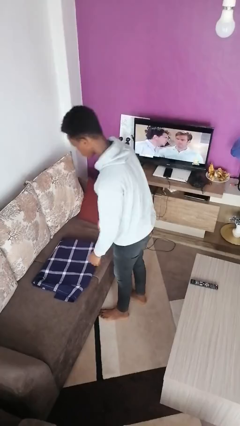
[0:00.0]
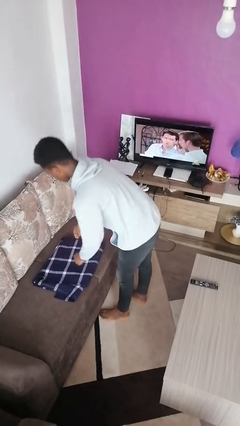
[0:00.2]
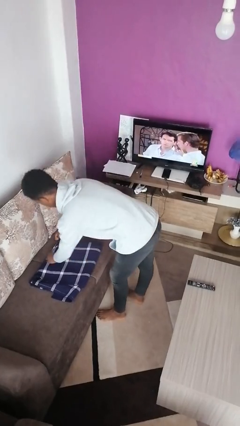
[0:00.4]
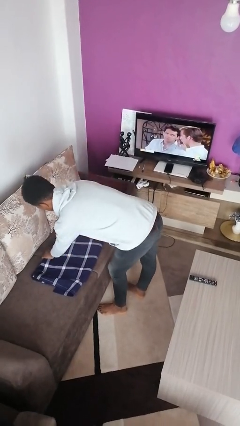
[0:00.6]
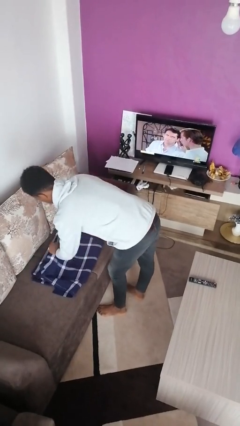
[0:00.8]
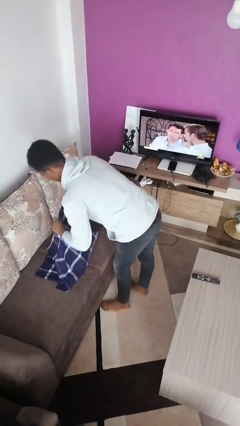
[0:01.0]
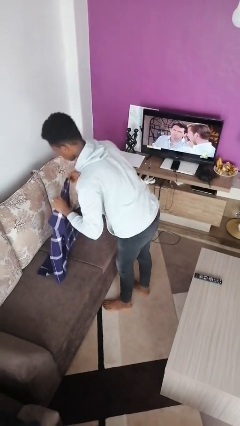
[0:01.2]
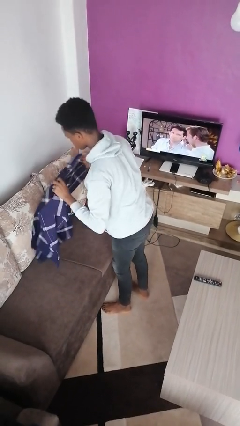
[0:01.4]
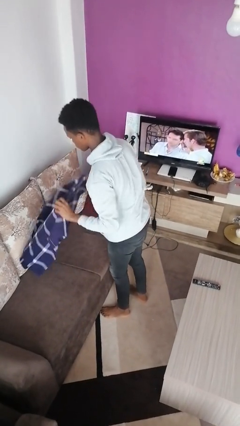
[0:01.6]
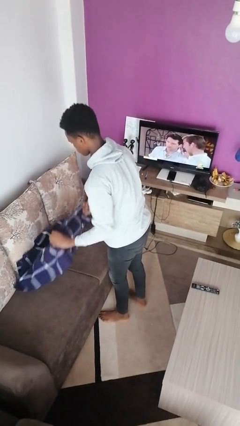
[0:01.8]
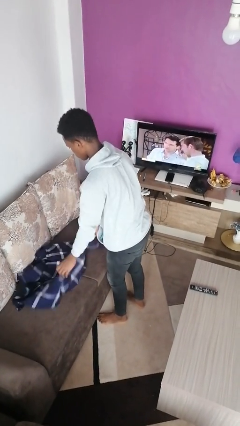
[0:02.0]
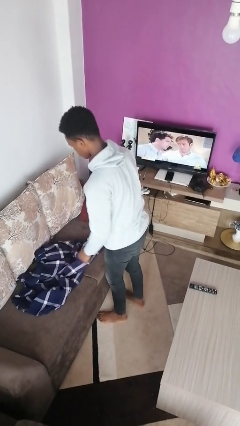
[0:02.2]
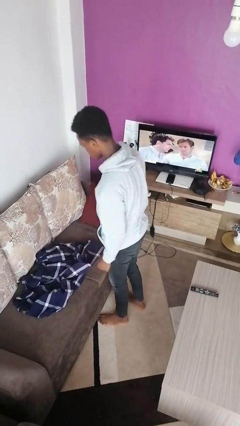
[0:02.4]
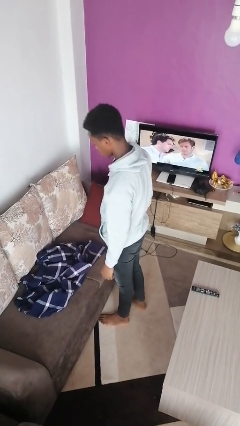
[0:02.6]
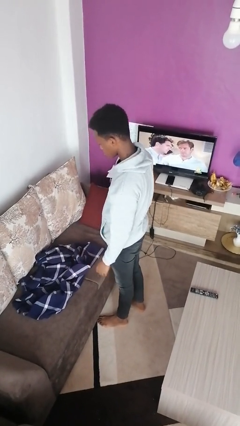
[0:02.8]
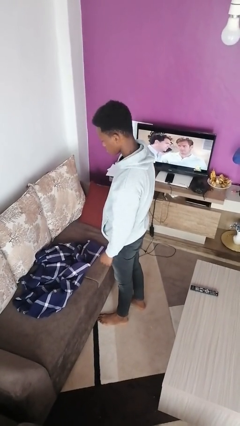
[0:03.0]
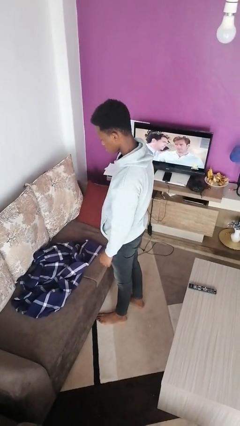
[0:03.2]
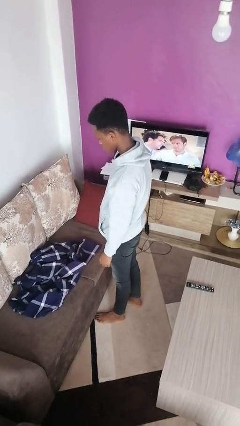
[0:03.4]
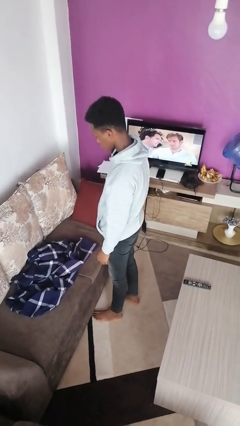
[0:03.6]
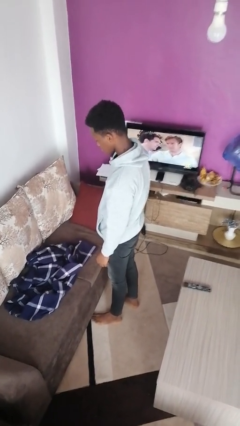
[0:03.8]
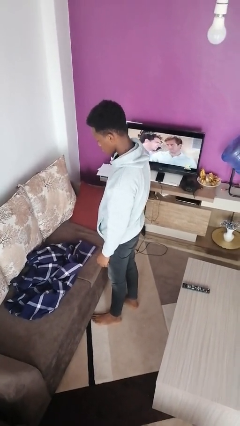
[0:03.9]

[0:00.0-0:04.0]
person unfolds blanket

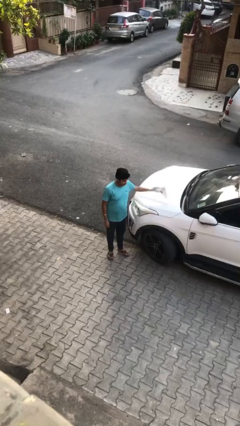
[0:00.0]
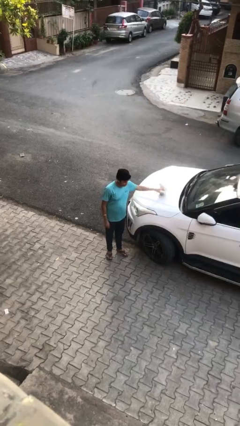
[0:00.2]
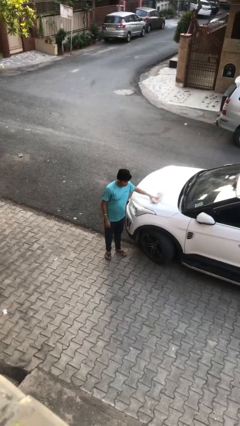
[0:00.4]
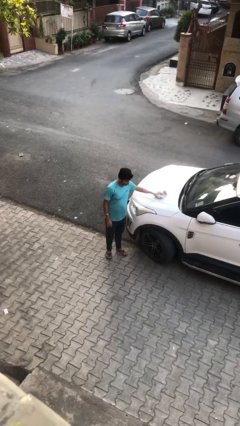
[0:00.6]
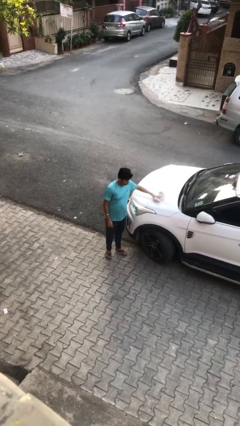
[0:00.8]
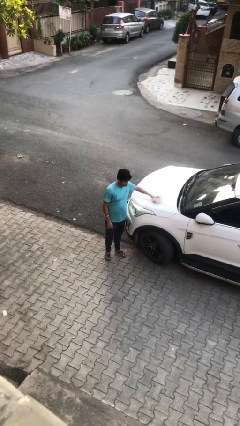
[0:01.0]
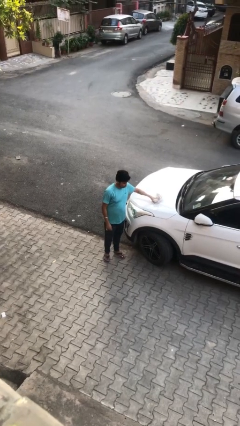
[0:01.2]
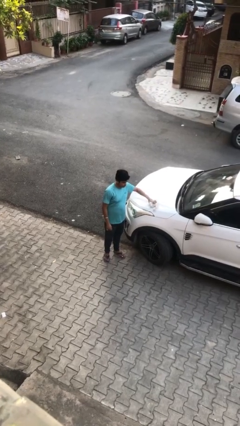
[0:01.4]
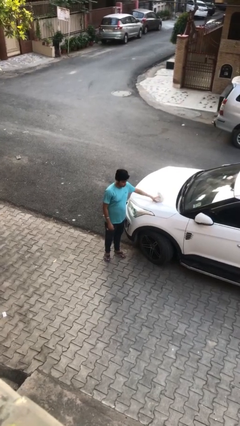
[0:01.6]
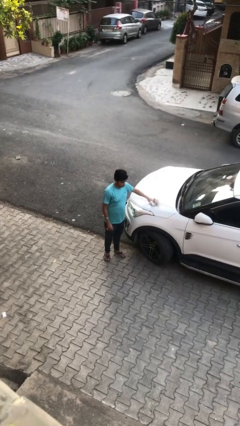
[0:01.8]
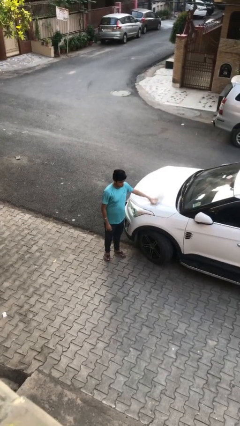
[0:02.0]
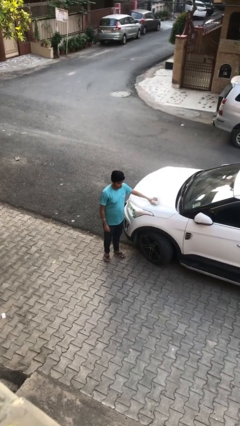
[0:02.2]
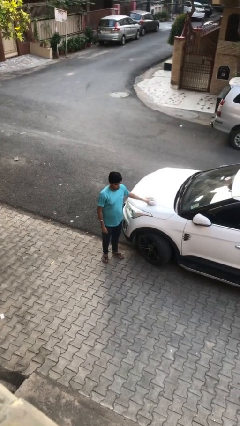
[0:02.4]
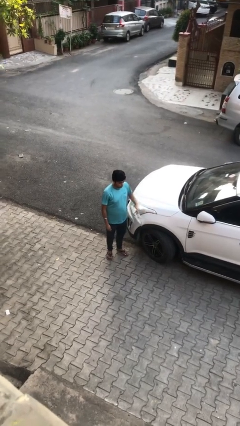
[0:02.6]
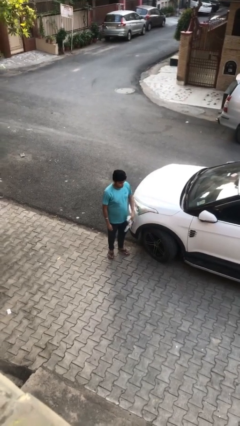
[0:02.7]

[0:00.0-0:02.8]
person polishes car with rag

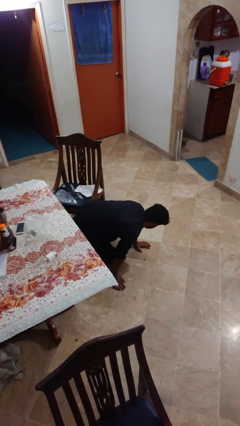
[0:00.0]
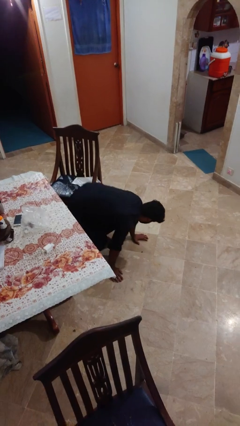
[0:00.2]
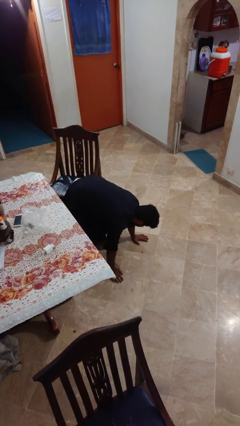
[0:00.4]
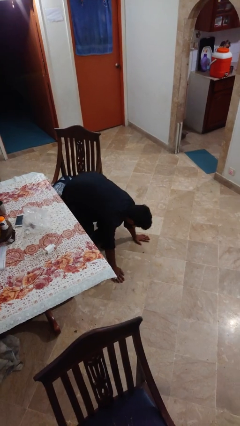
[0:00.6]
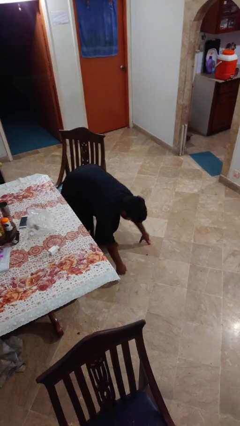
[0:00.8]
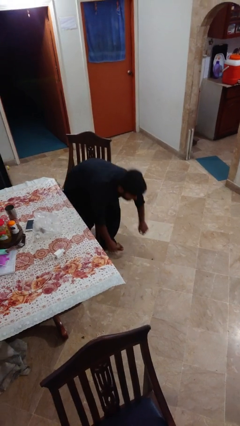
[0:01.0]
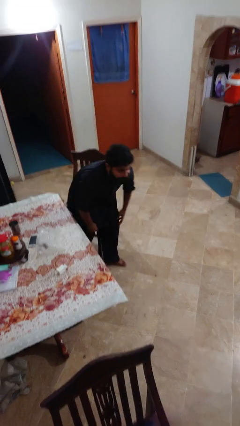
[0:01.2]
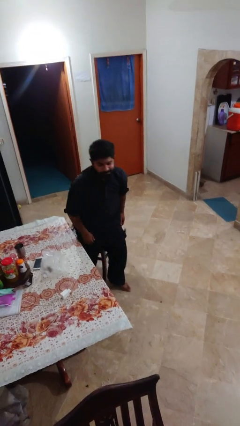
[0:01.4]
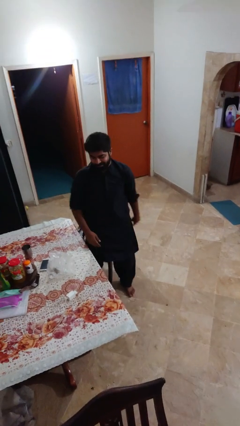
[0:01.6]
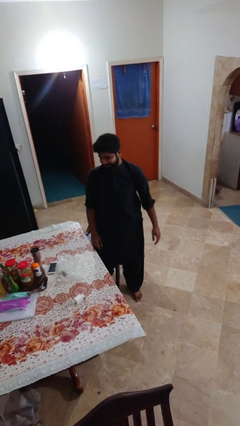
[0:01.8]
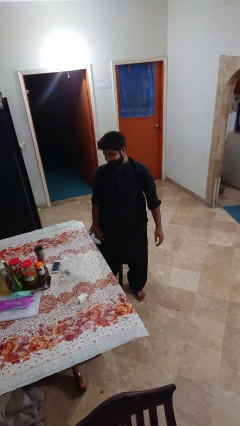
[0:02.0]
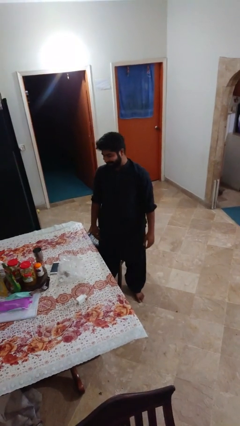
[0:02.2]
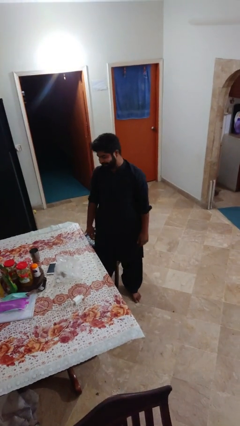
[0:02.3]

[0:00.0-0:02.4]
person stands up from floor

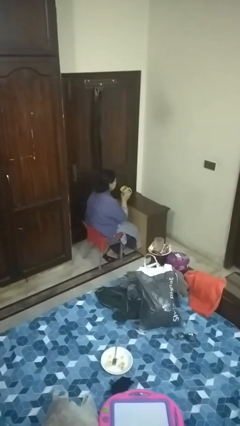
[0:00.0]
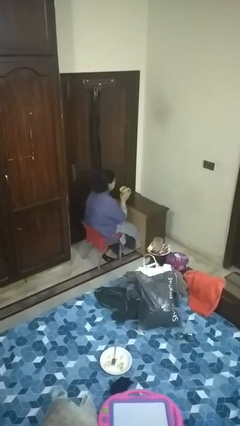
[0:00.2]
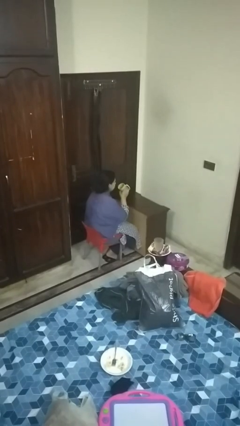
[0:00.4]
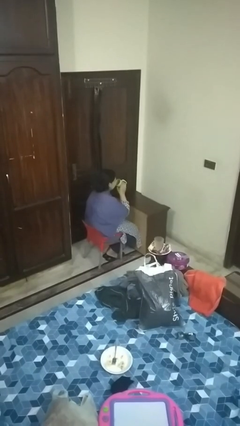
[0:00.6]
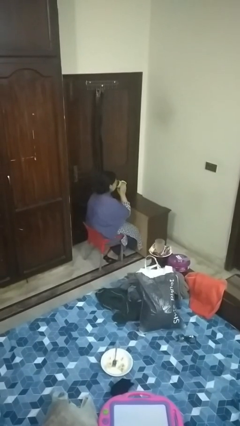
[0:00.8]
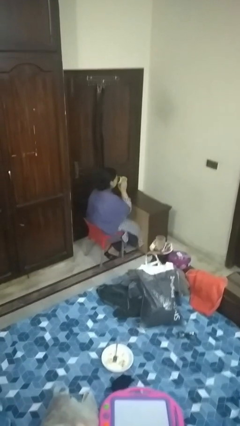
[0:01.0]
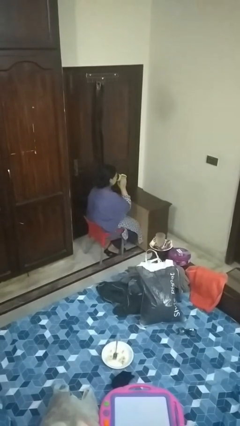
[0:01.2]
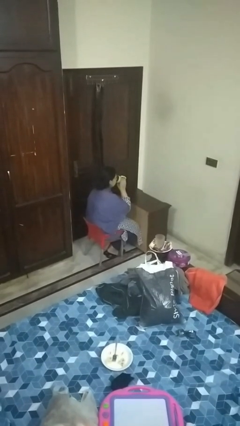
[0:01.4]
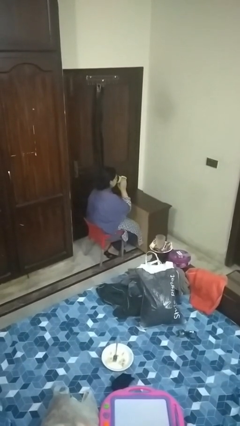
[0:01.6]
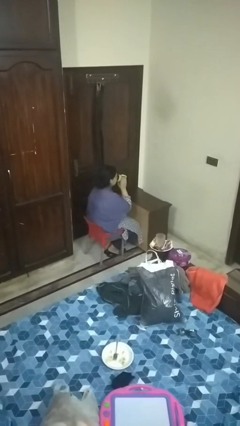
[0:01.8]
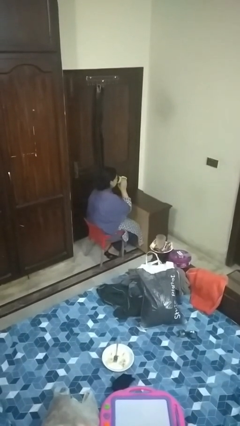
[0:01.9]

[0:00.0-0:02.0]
person drinks from mug

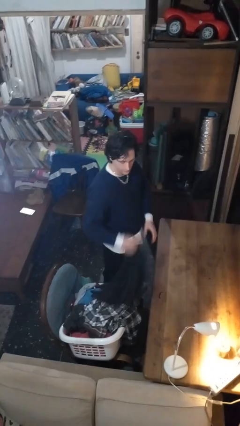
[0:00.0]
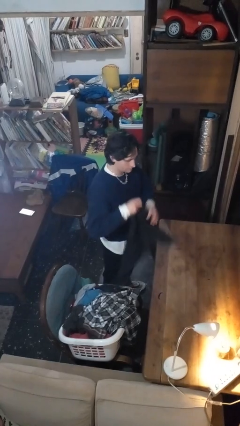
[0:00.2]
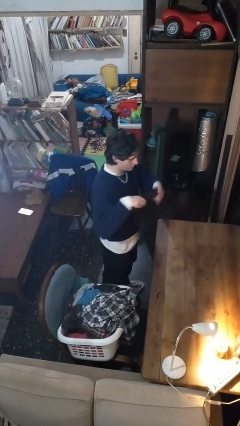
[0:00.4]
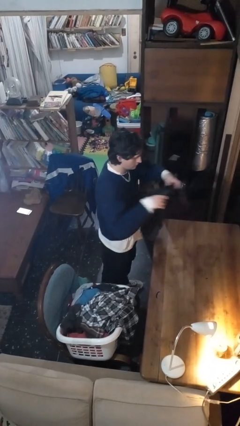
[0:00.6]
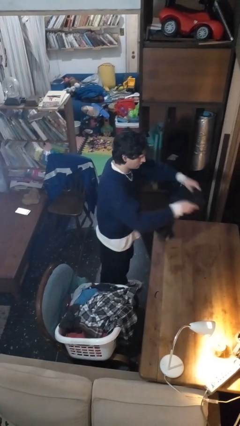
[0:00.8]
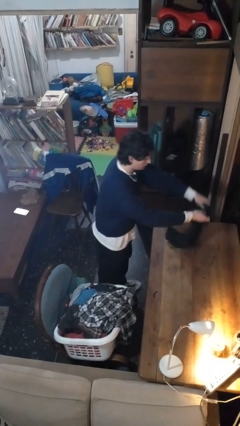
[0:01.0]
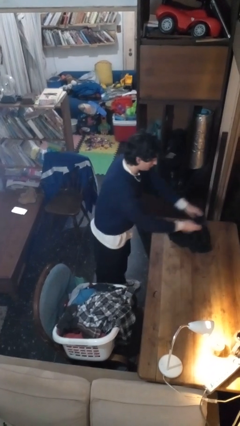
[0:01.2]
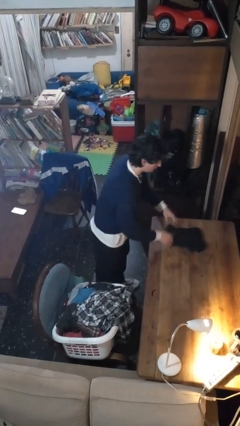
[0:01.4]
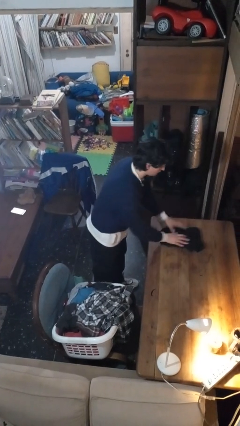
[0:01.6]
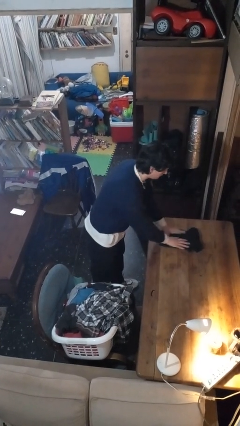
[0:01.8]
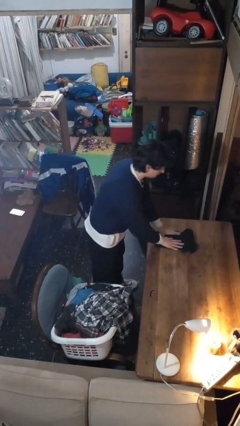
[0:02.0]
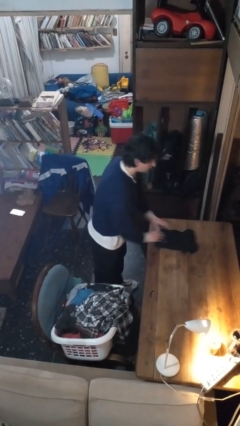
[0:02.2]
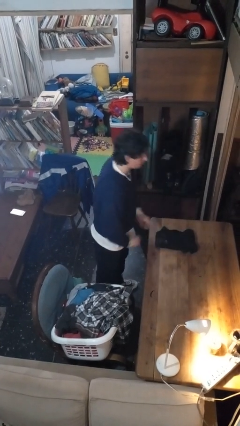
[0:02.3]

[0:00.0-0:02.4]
person folds shirt

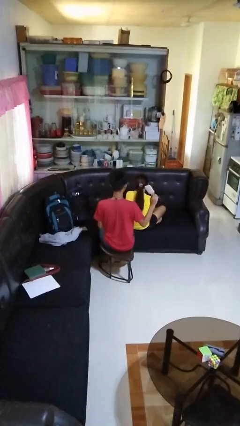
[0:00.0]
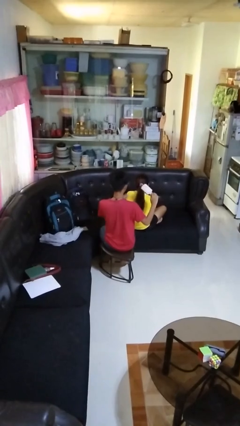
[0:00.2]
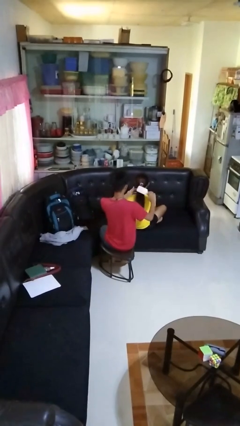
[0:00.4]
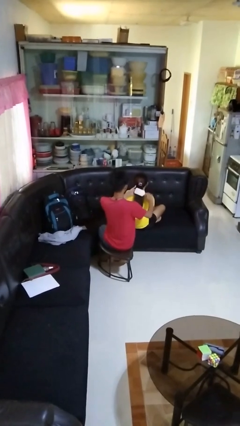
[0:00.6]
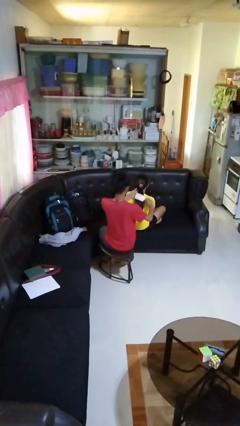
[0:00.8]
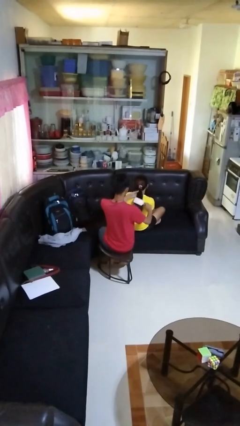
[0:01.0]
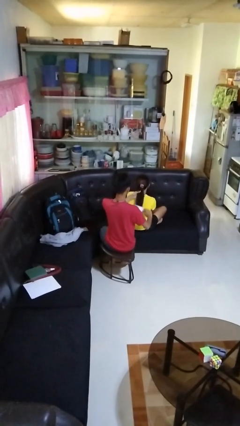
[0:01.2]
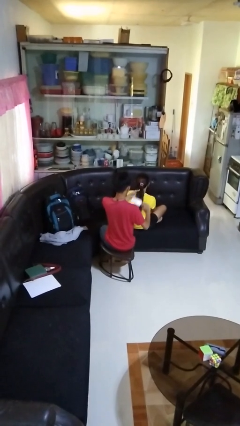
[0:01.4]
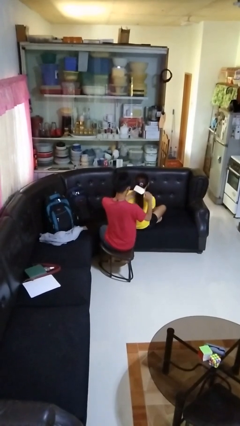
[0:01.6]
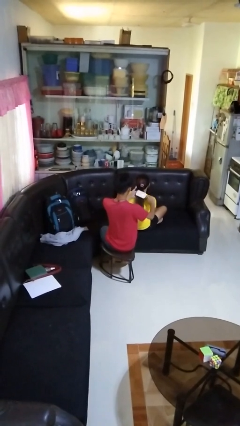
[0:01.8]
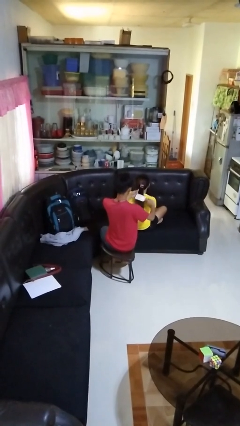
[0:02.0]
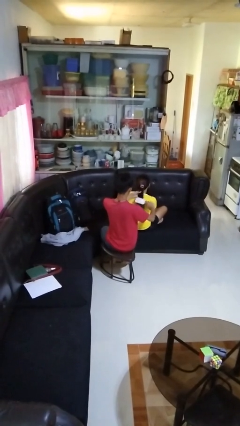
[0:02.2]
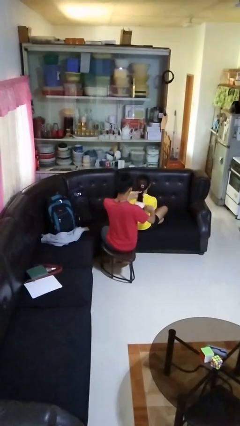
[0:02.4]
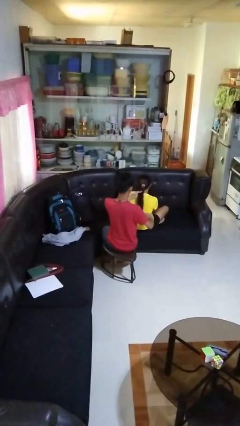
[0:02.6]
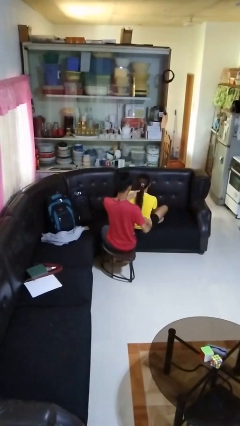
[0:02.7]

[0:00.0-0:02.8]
person brushes hair of person

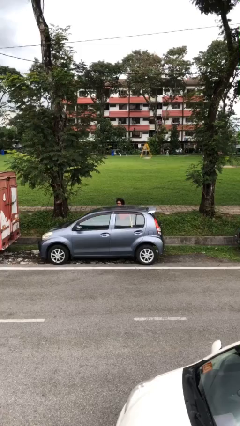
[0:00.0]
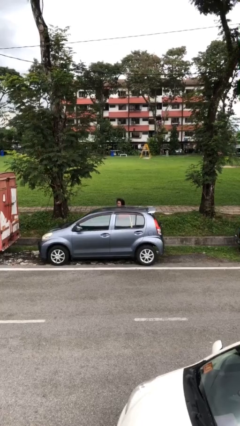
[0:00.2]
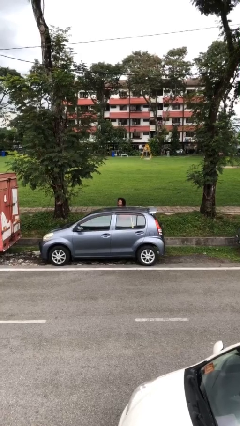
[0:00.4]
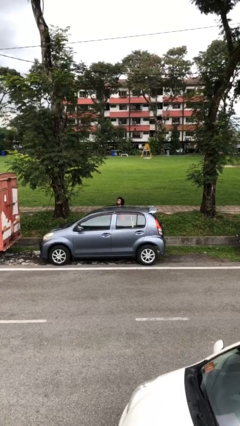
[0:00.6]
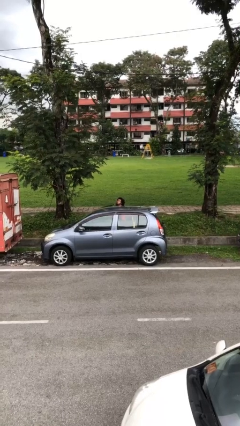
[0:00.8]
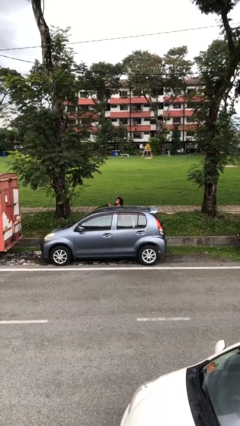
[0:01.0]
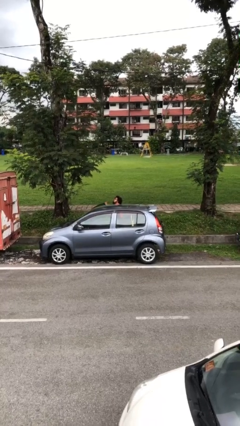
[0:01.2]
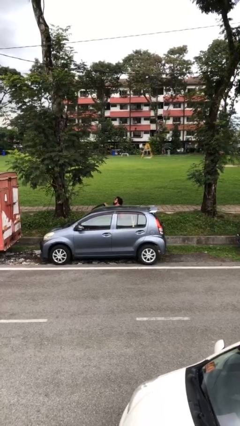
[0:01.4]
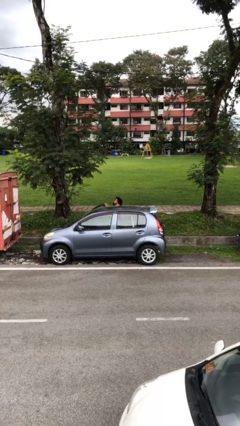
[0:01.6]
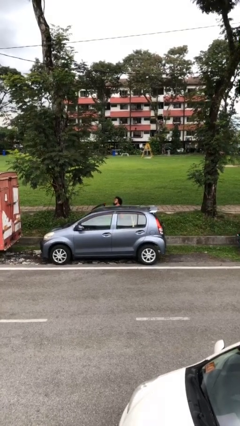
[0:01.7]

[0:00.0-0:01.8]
person opens car door
